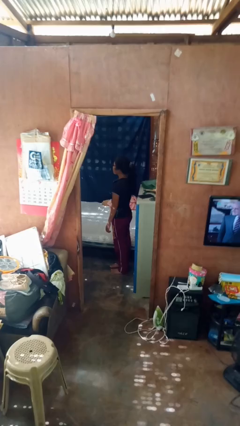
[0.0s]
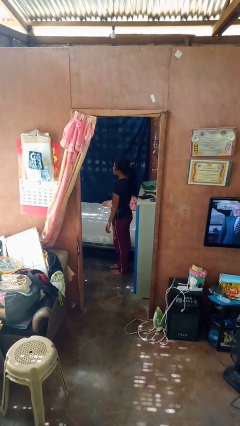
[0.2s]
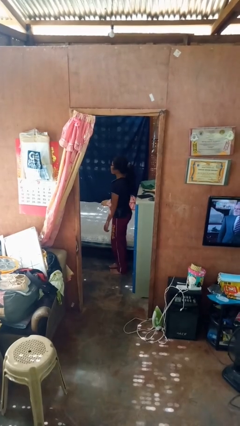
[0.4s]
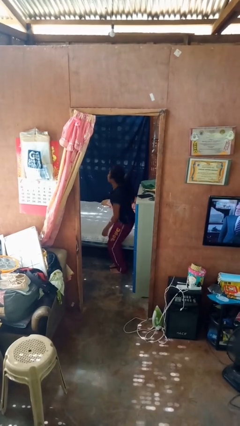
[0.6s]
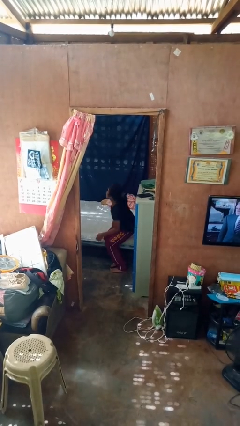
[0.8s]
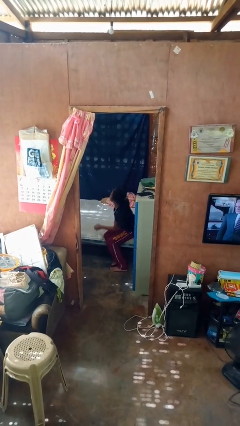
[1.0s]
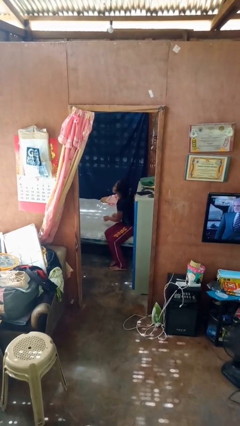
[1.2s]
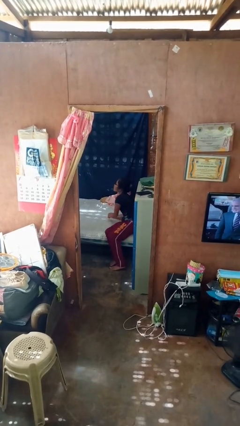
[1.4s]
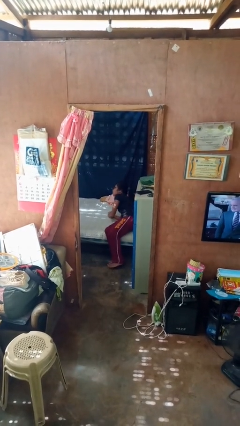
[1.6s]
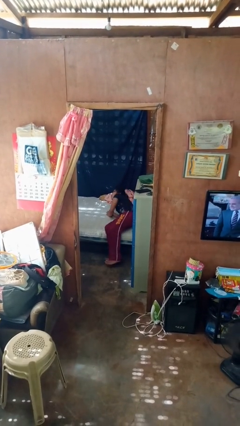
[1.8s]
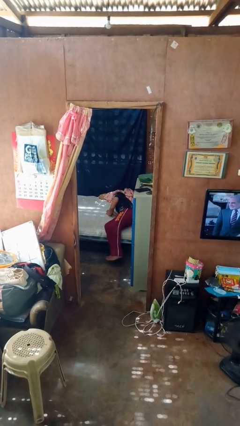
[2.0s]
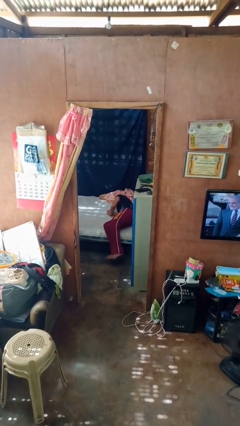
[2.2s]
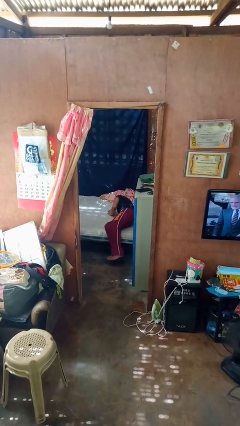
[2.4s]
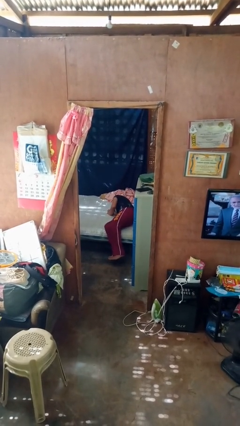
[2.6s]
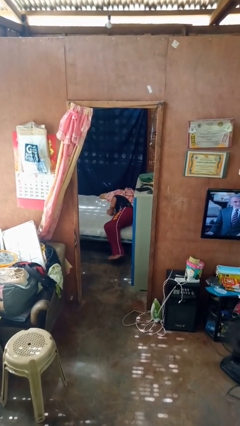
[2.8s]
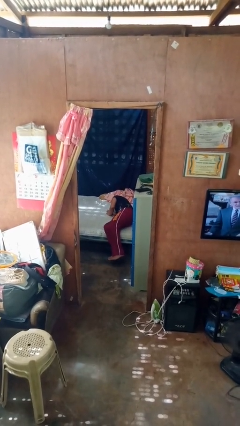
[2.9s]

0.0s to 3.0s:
person lies down on bed

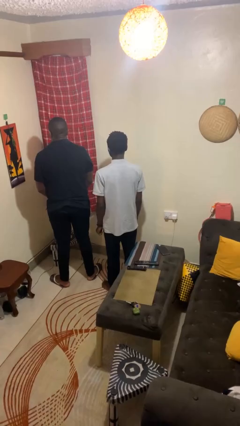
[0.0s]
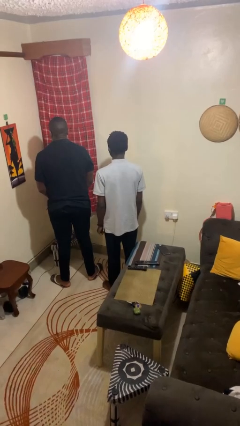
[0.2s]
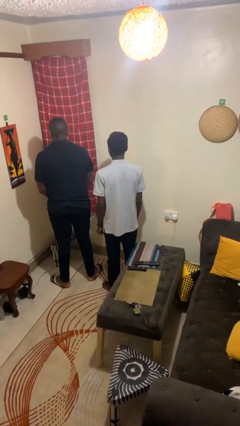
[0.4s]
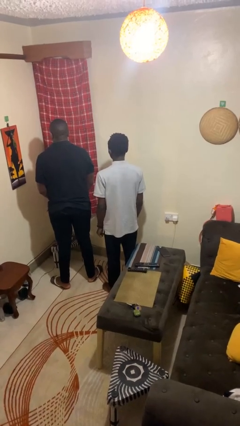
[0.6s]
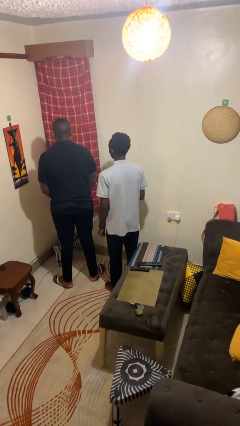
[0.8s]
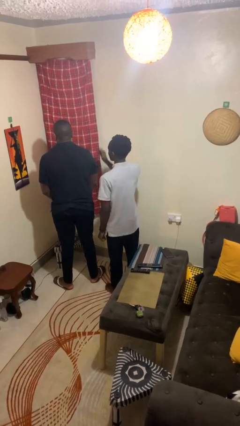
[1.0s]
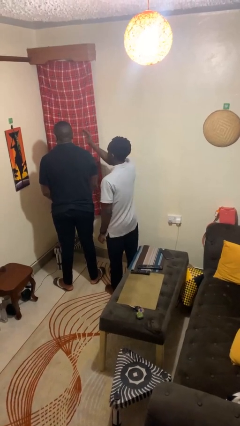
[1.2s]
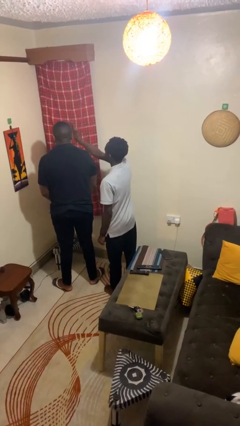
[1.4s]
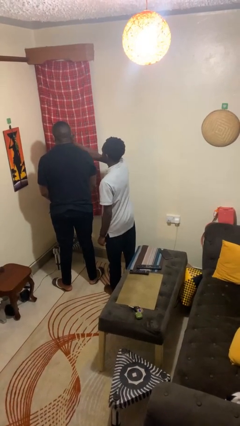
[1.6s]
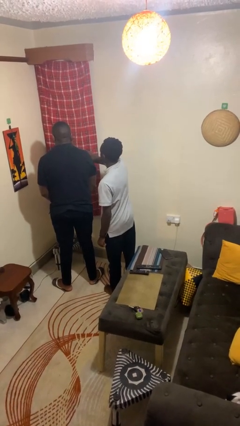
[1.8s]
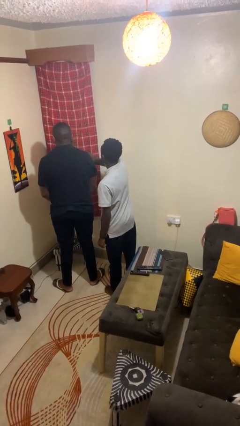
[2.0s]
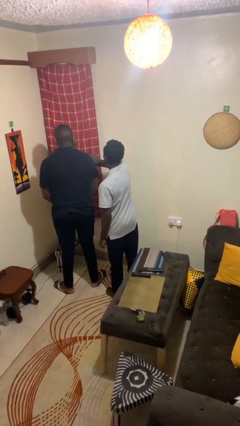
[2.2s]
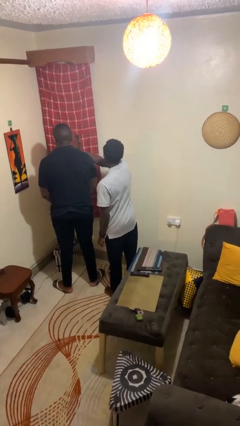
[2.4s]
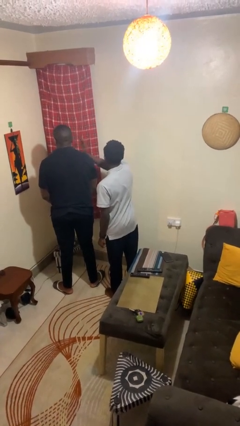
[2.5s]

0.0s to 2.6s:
person touches face of person

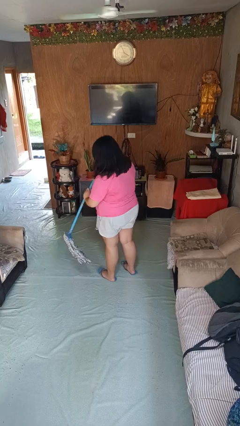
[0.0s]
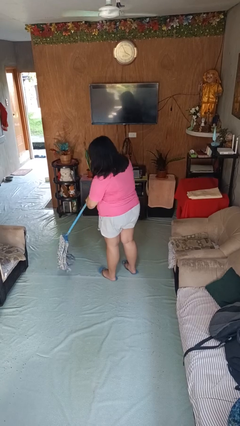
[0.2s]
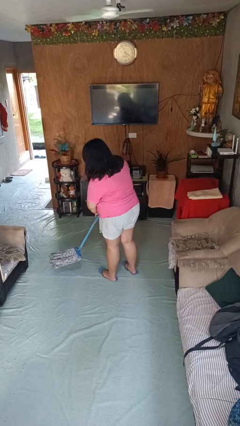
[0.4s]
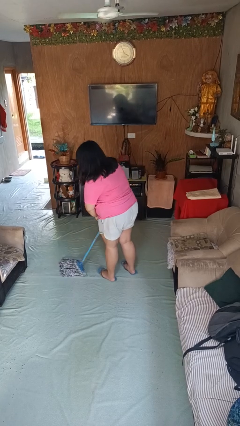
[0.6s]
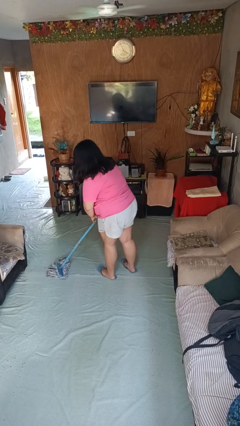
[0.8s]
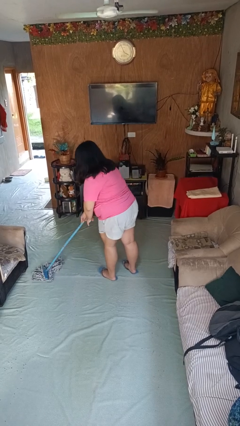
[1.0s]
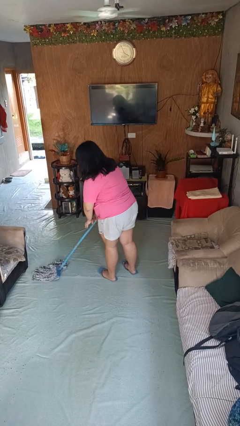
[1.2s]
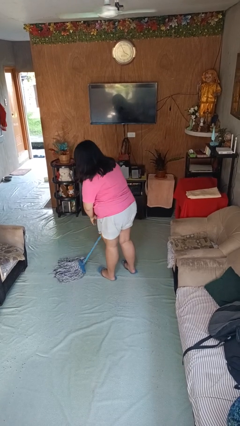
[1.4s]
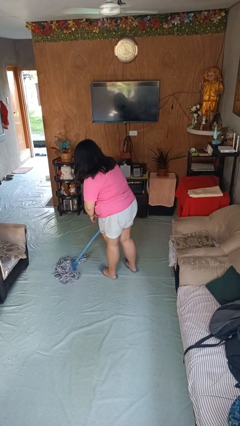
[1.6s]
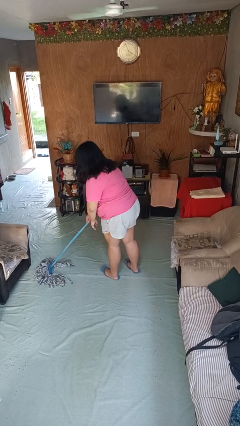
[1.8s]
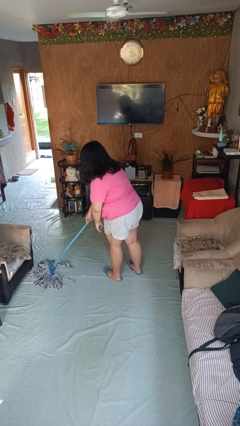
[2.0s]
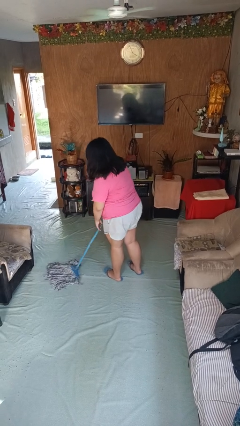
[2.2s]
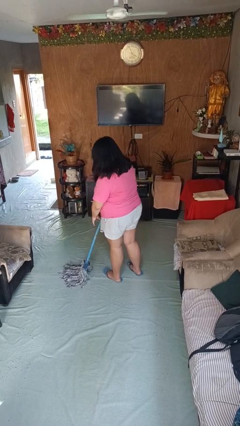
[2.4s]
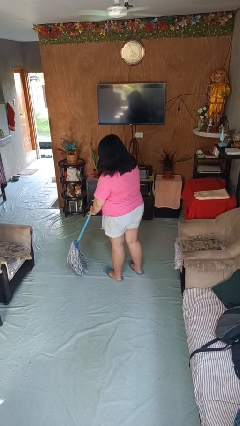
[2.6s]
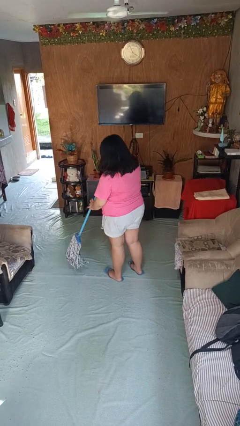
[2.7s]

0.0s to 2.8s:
person mops

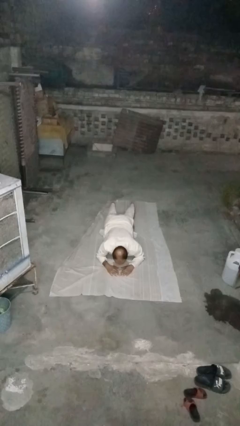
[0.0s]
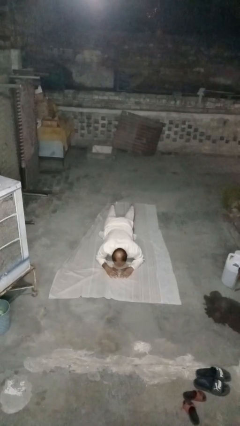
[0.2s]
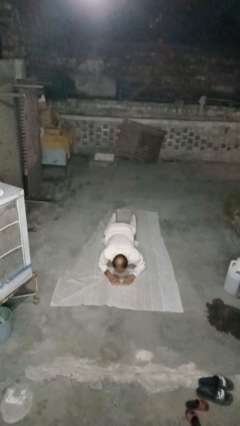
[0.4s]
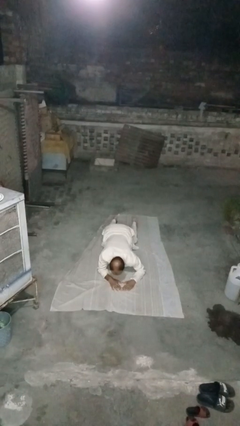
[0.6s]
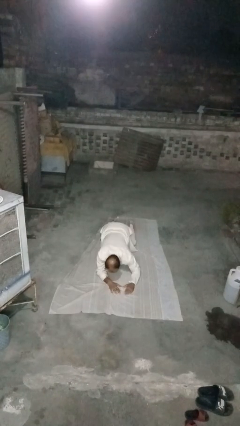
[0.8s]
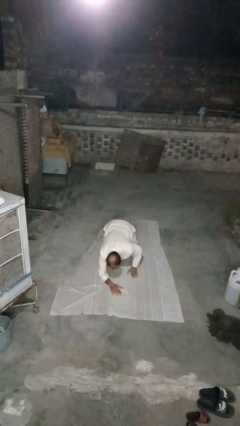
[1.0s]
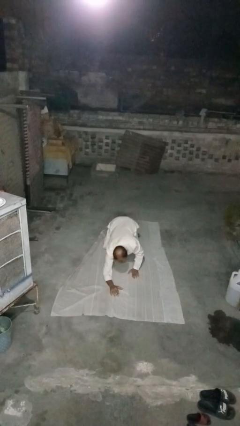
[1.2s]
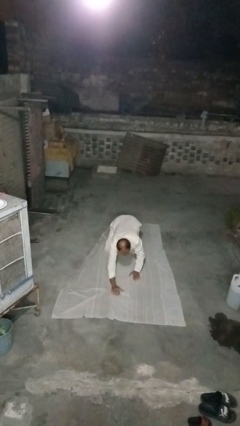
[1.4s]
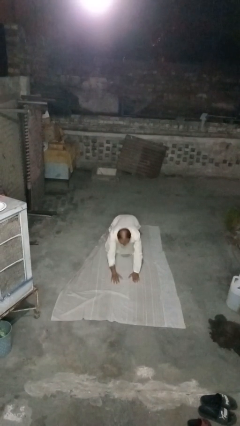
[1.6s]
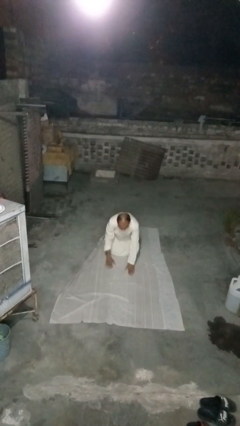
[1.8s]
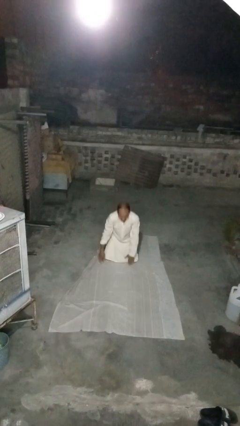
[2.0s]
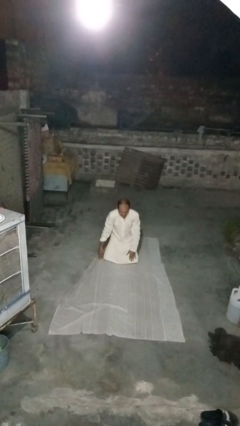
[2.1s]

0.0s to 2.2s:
person stands up from floor

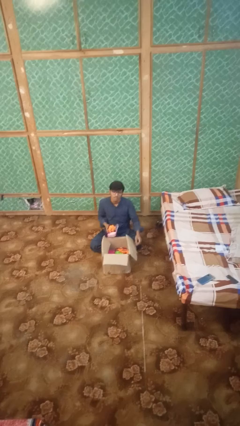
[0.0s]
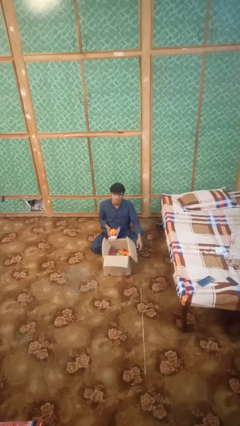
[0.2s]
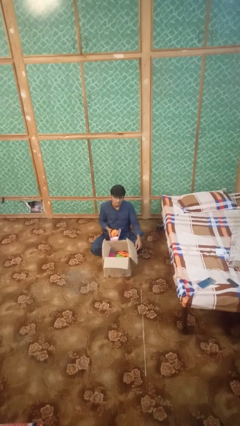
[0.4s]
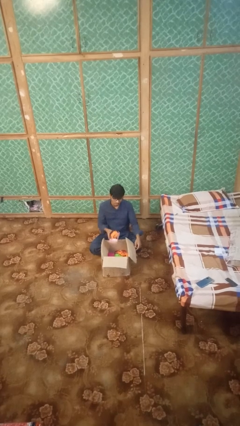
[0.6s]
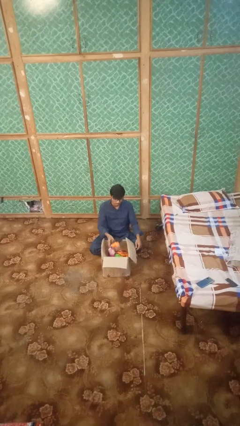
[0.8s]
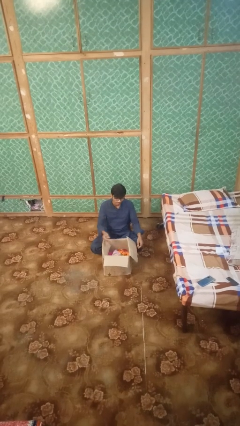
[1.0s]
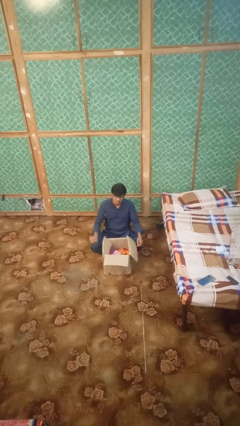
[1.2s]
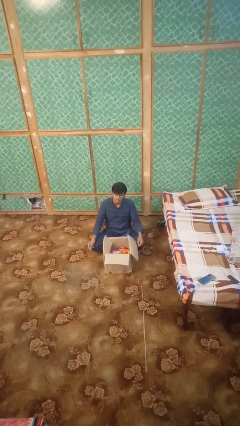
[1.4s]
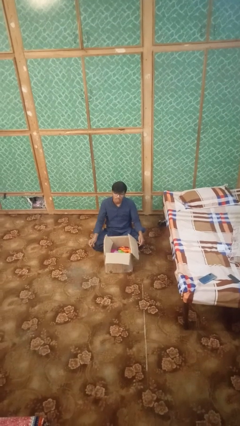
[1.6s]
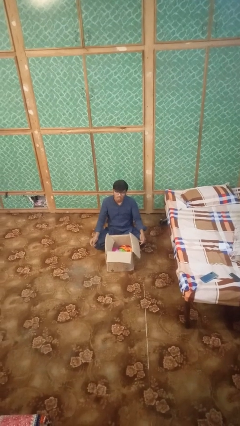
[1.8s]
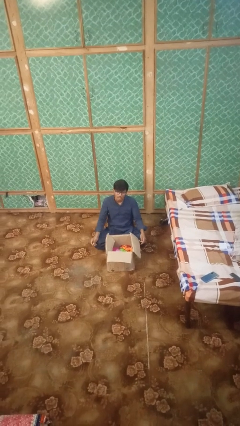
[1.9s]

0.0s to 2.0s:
person puts object into box

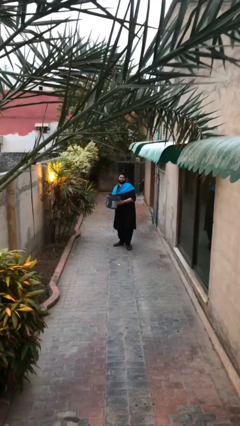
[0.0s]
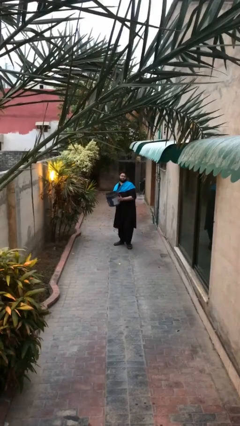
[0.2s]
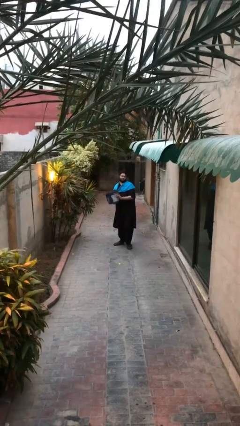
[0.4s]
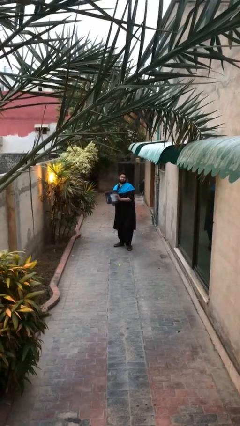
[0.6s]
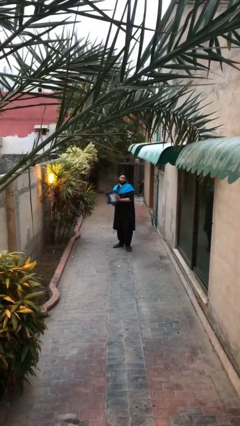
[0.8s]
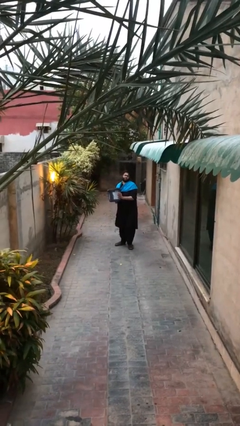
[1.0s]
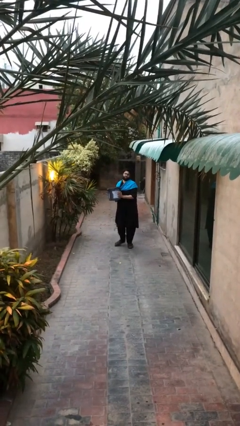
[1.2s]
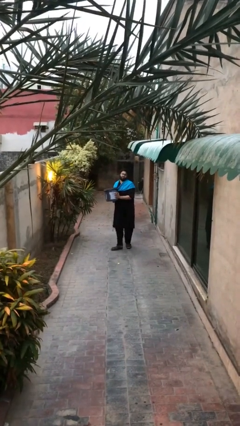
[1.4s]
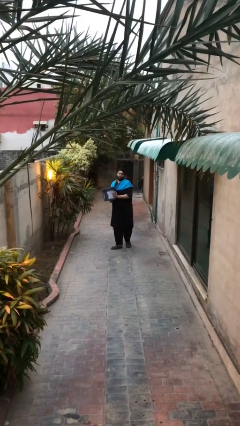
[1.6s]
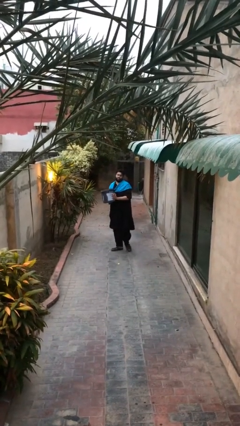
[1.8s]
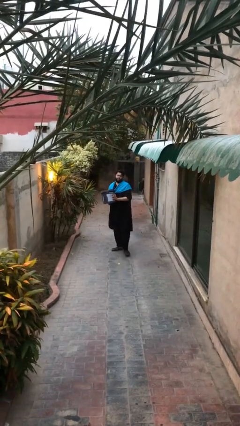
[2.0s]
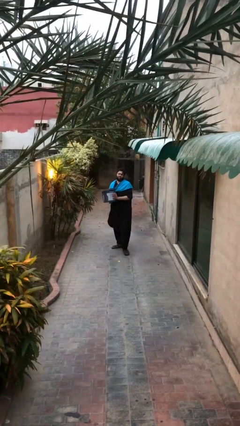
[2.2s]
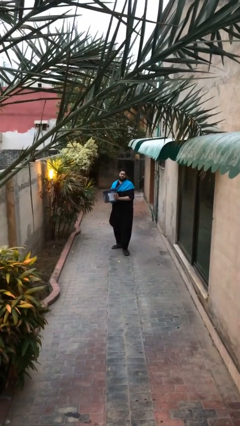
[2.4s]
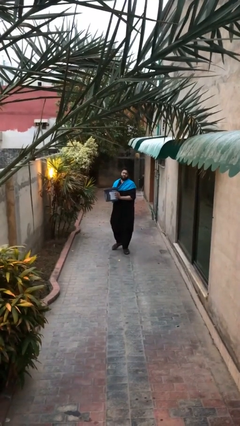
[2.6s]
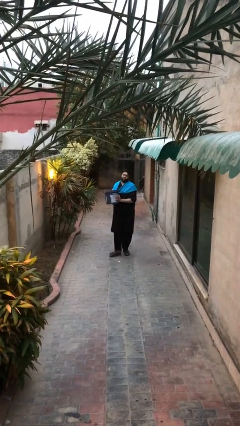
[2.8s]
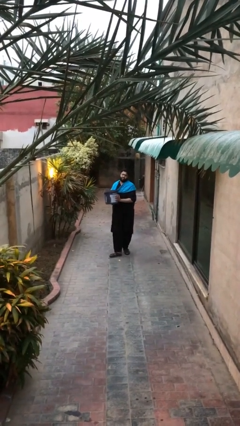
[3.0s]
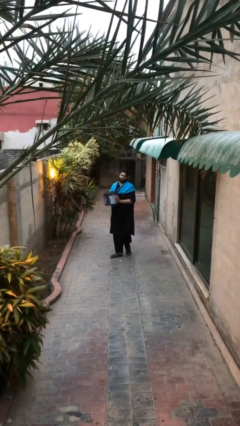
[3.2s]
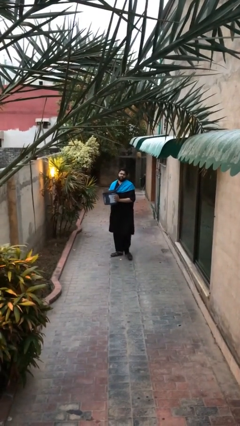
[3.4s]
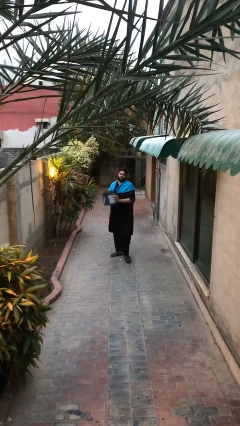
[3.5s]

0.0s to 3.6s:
person carries heavy object

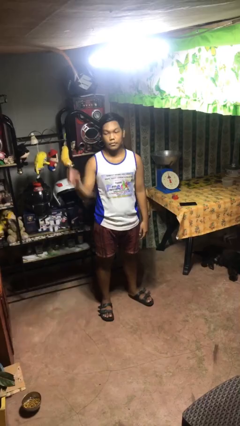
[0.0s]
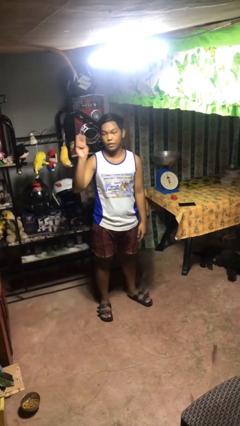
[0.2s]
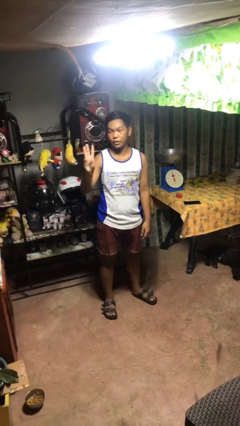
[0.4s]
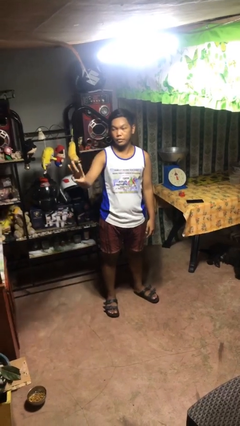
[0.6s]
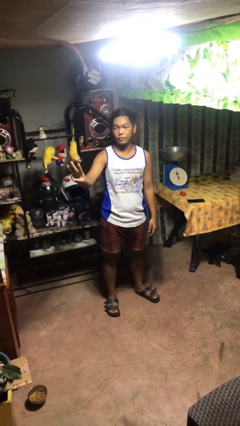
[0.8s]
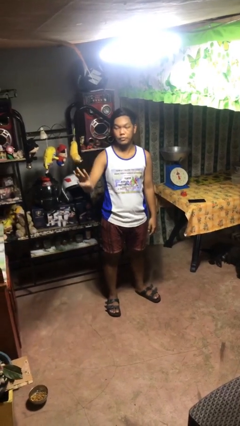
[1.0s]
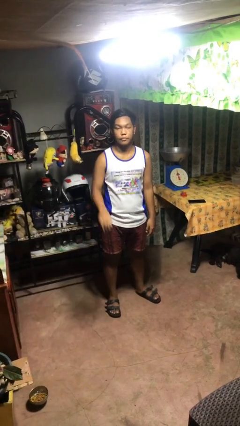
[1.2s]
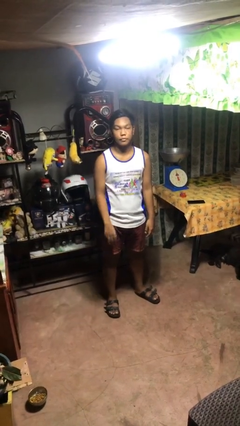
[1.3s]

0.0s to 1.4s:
person gestures number three

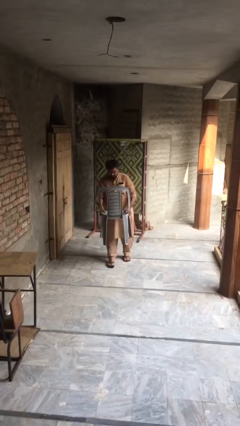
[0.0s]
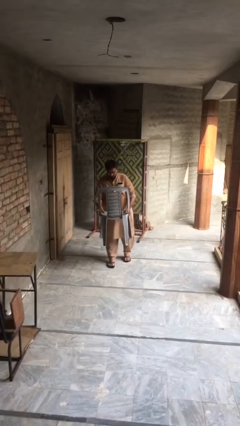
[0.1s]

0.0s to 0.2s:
person puts down object on floor
